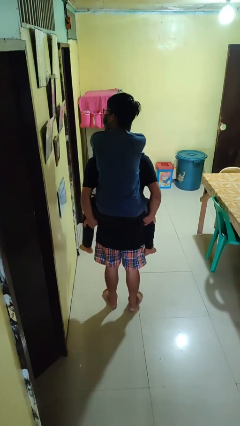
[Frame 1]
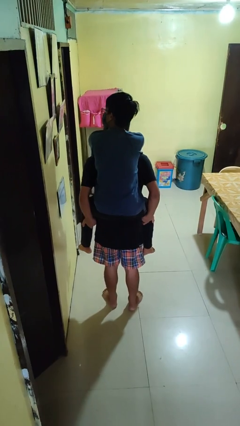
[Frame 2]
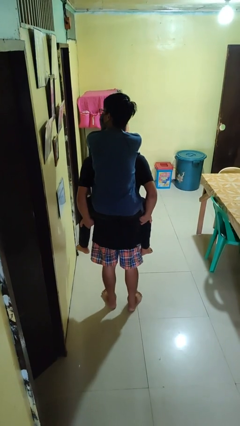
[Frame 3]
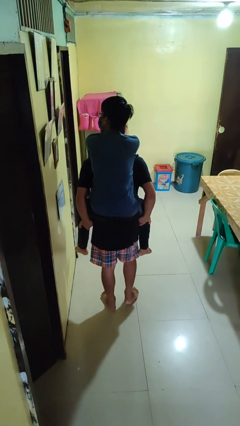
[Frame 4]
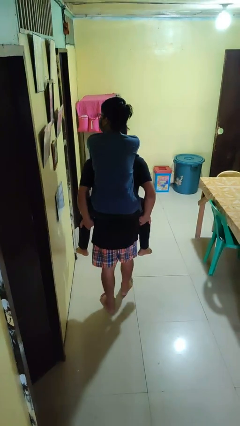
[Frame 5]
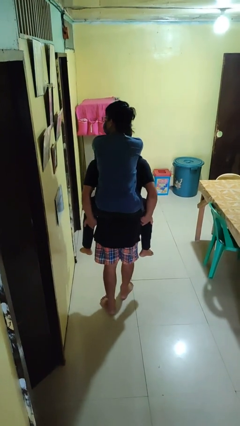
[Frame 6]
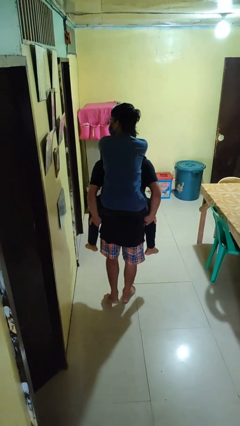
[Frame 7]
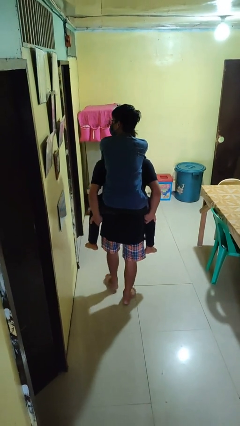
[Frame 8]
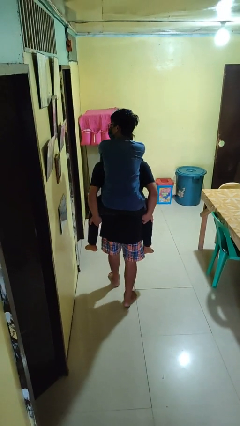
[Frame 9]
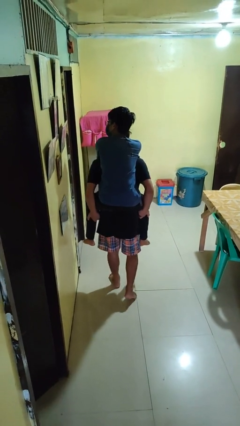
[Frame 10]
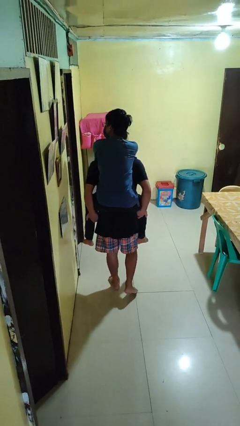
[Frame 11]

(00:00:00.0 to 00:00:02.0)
person carries person on back

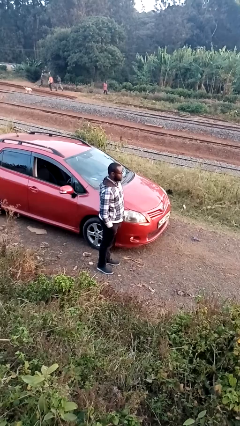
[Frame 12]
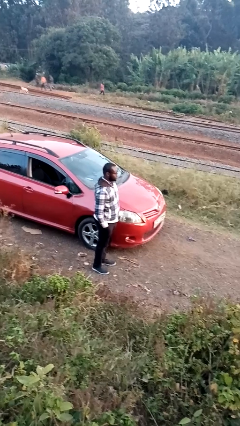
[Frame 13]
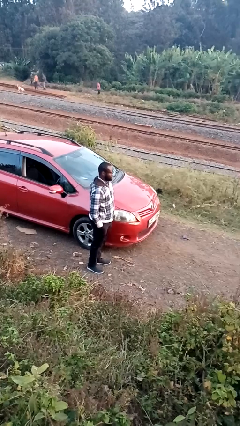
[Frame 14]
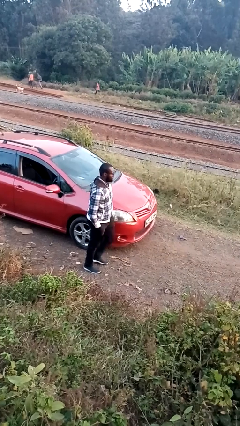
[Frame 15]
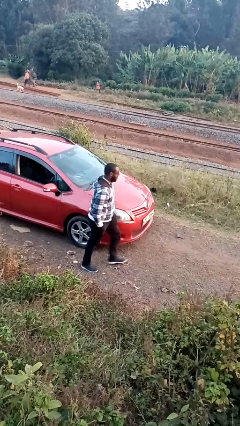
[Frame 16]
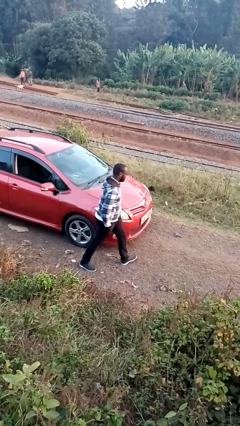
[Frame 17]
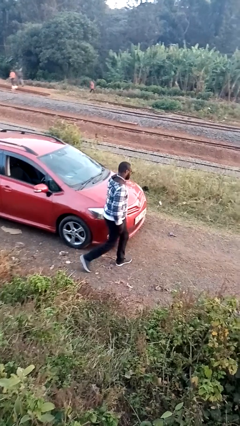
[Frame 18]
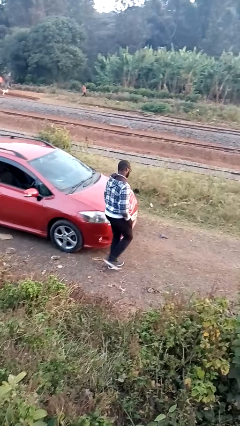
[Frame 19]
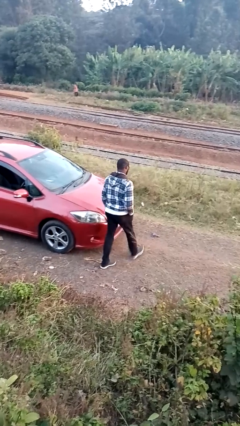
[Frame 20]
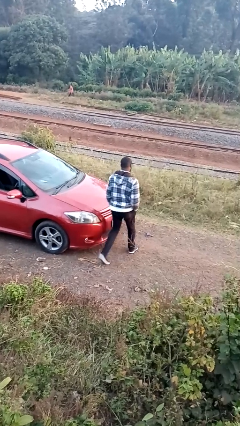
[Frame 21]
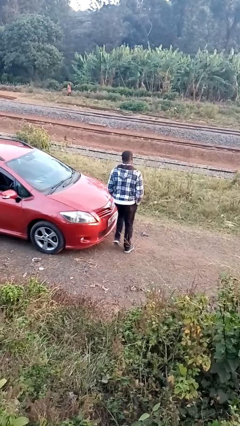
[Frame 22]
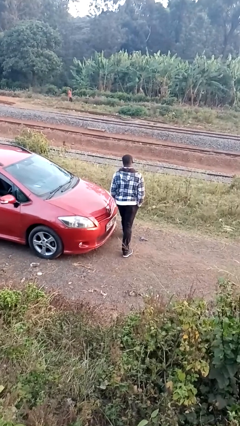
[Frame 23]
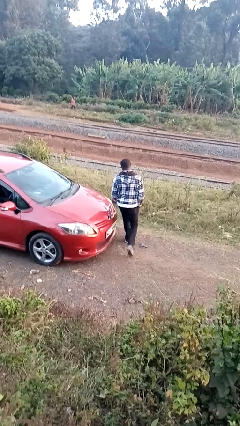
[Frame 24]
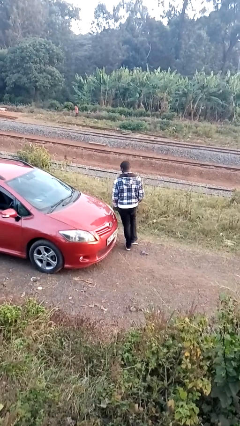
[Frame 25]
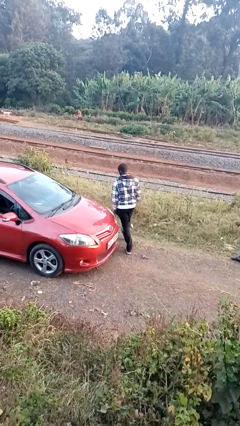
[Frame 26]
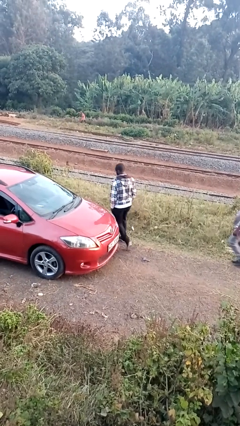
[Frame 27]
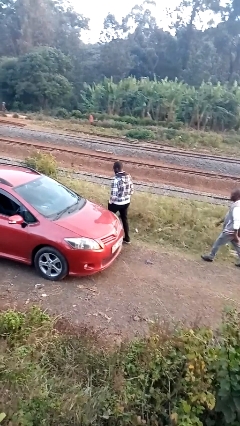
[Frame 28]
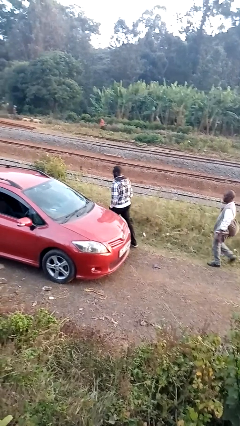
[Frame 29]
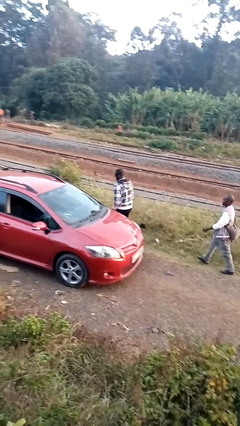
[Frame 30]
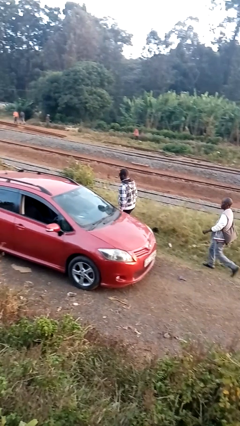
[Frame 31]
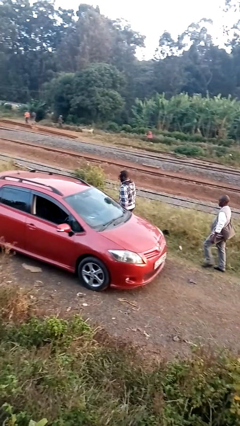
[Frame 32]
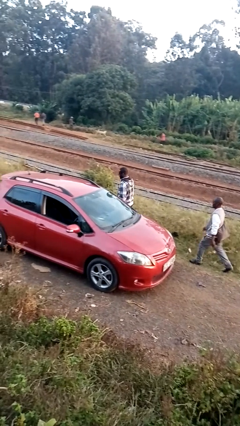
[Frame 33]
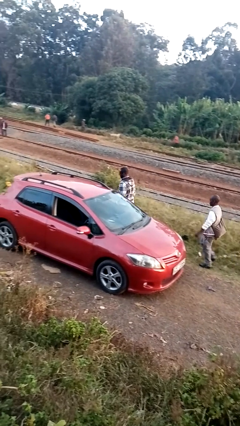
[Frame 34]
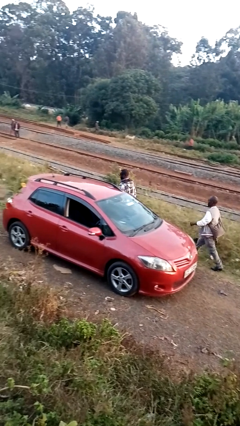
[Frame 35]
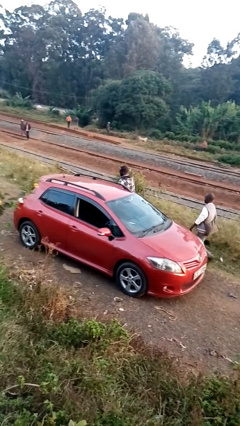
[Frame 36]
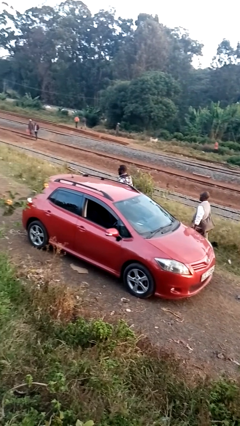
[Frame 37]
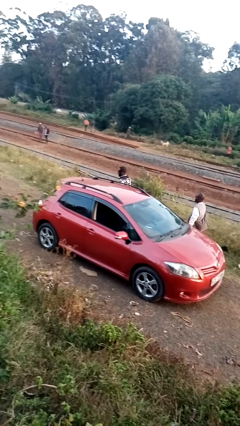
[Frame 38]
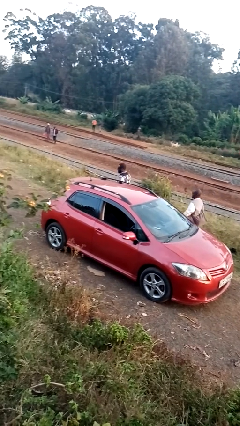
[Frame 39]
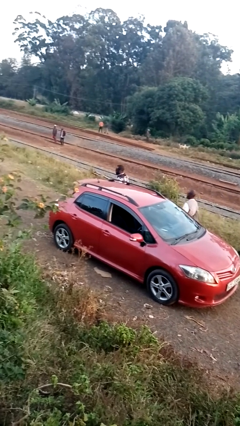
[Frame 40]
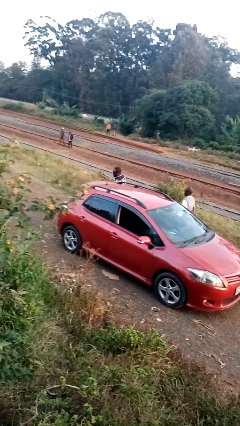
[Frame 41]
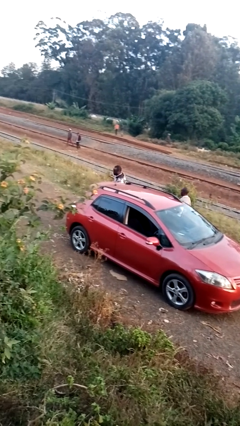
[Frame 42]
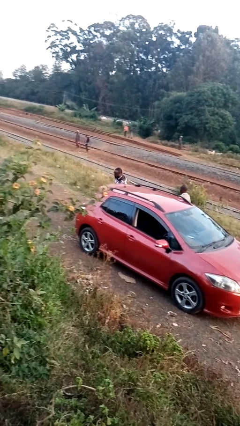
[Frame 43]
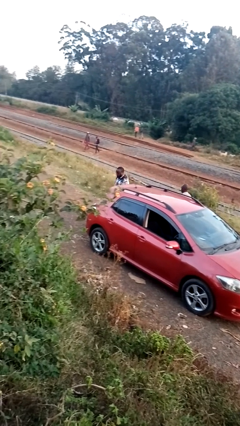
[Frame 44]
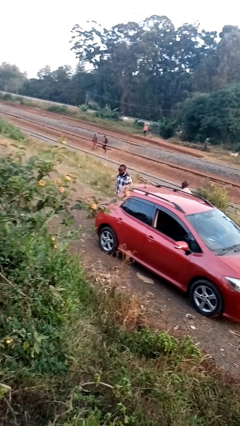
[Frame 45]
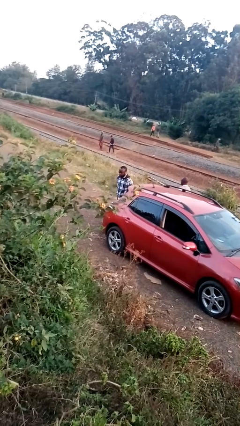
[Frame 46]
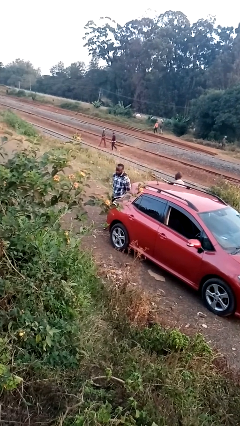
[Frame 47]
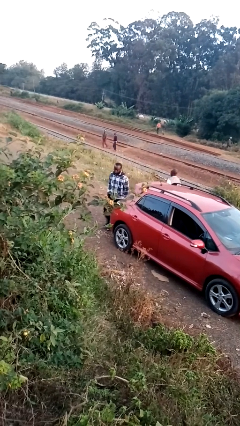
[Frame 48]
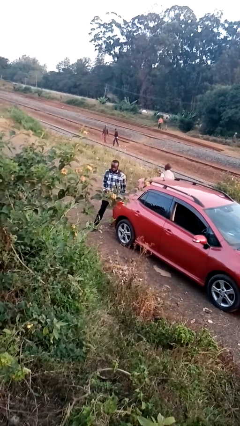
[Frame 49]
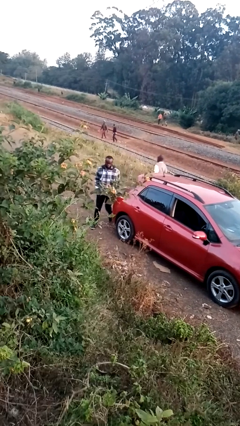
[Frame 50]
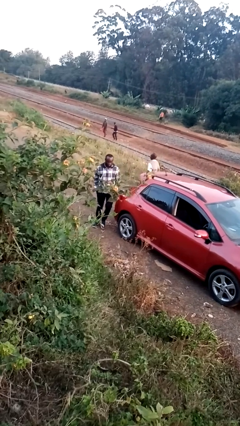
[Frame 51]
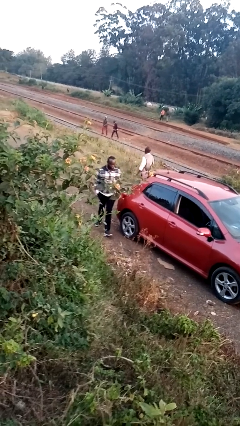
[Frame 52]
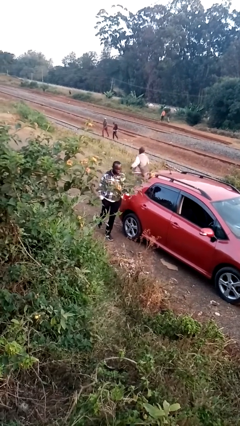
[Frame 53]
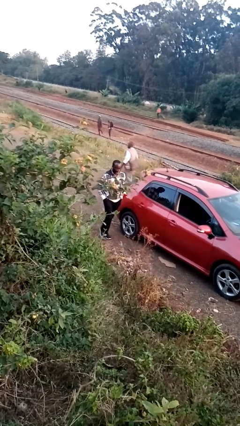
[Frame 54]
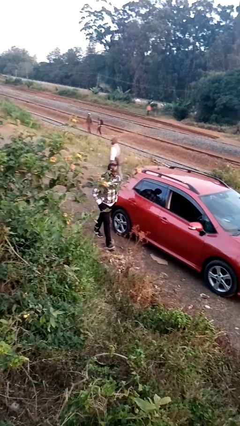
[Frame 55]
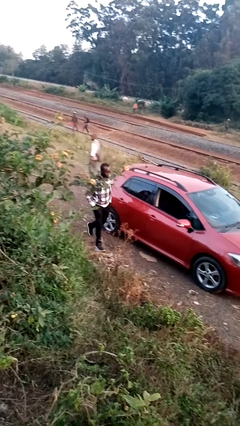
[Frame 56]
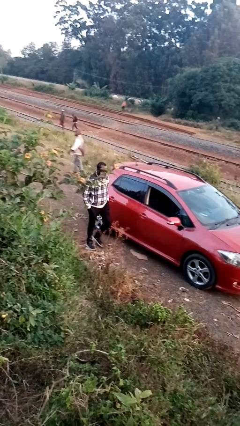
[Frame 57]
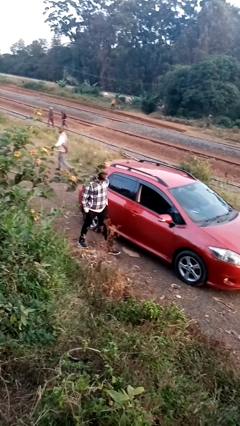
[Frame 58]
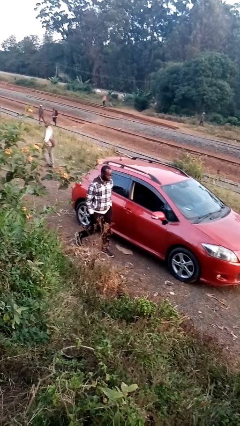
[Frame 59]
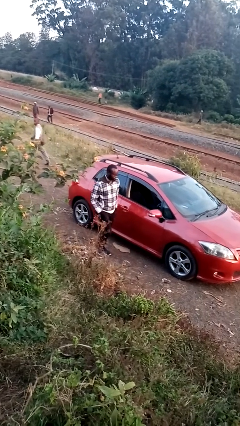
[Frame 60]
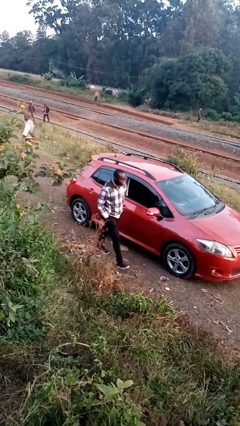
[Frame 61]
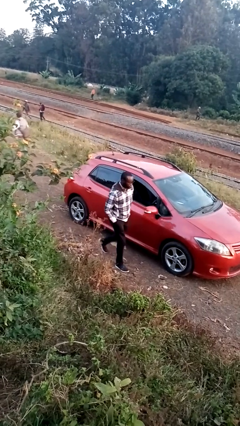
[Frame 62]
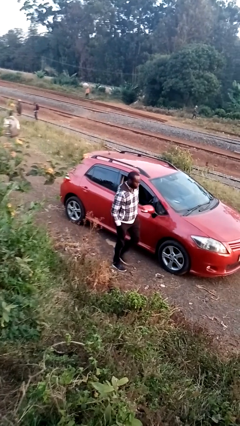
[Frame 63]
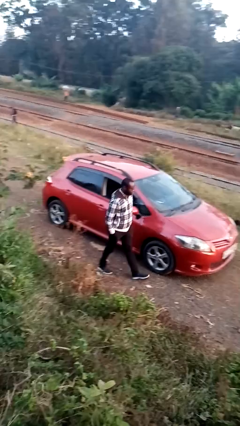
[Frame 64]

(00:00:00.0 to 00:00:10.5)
person walks around car

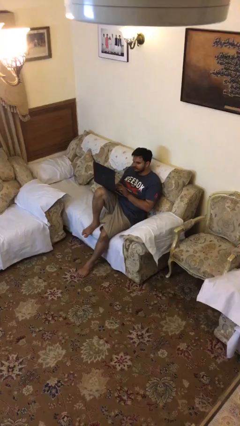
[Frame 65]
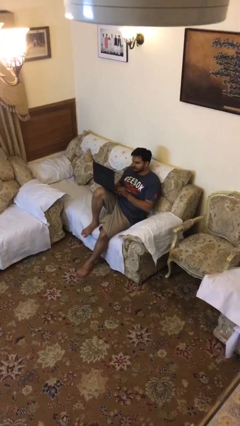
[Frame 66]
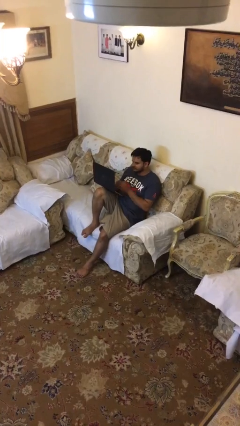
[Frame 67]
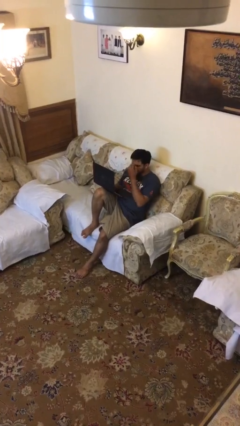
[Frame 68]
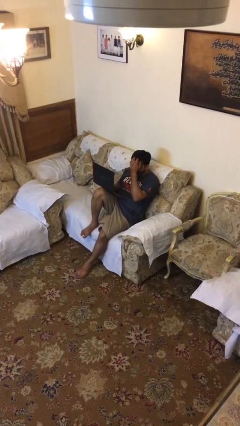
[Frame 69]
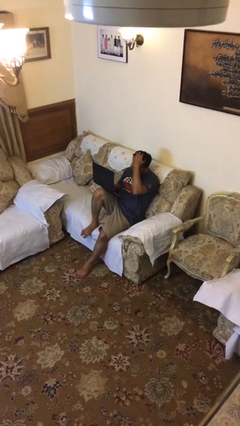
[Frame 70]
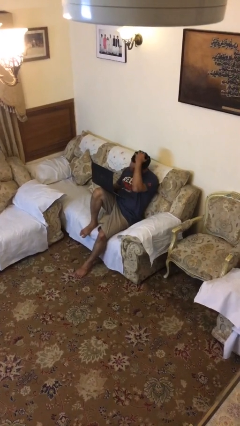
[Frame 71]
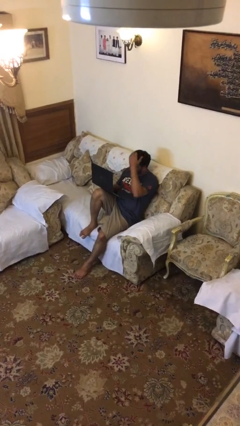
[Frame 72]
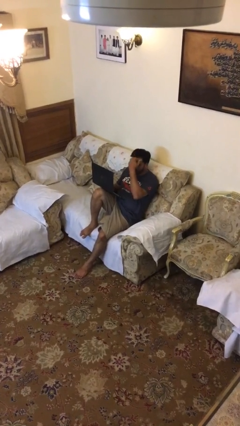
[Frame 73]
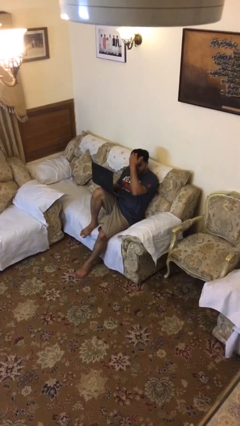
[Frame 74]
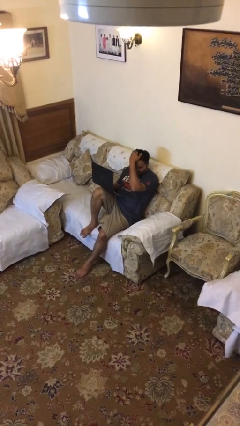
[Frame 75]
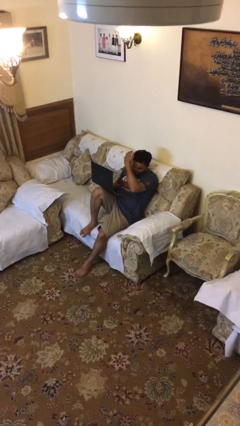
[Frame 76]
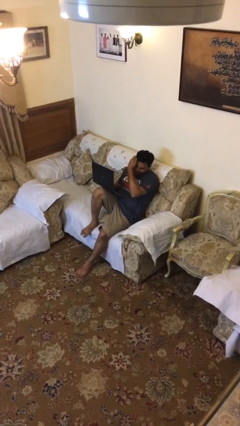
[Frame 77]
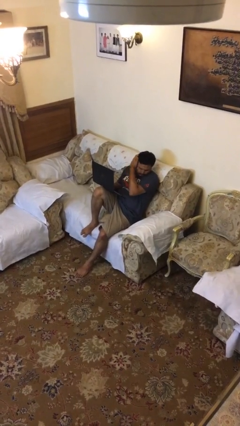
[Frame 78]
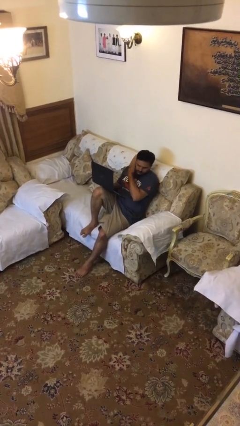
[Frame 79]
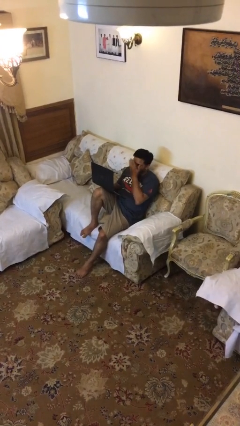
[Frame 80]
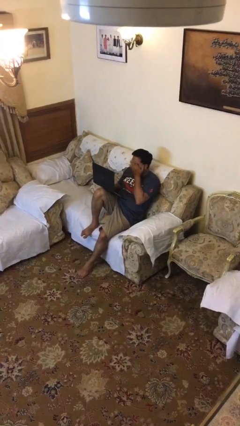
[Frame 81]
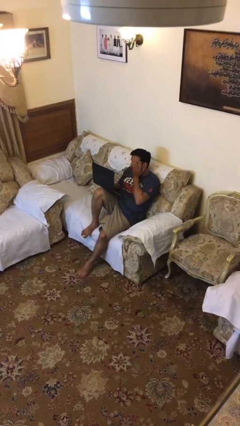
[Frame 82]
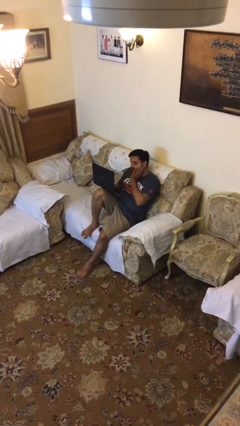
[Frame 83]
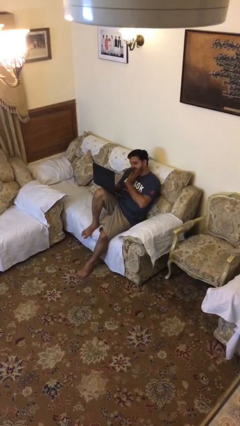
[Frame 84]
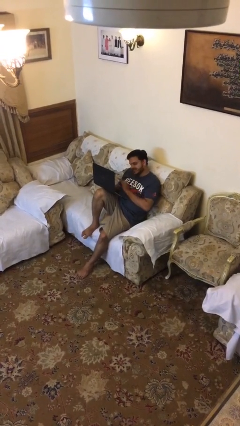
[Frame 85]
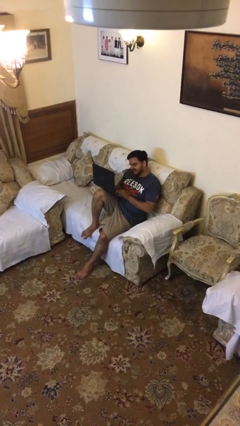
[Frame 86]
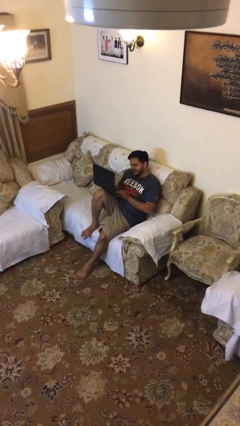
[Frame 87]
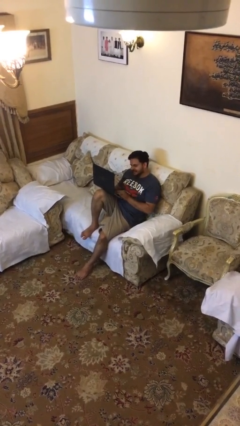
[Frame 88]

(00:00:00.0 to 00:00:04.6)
person interacts with laptop

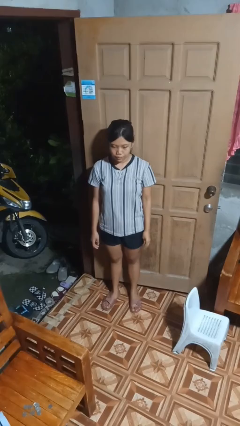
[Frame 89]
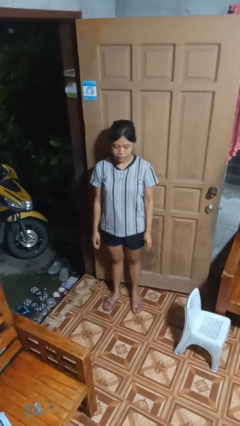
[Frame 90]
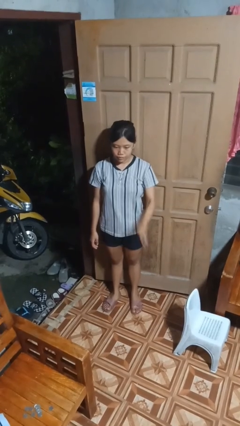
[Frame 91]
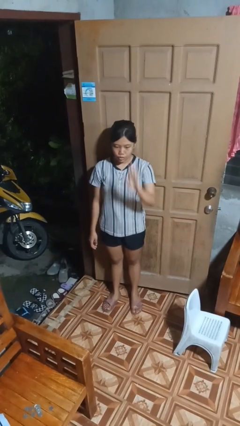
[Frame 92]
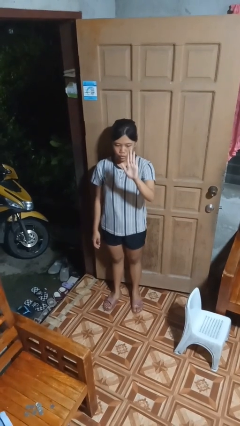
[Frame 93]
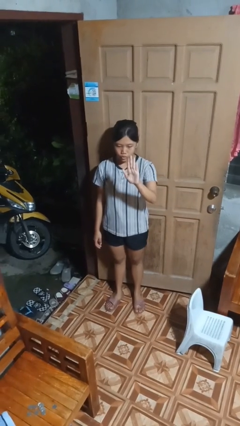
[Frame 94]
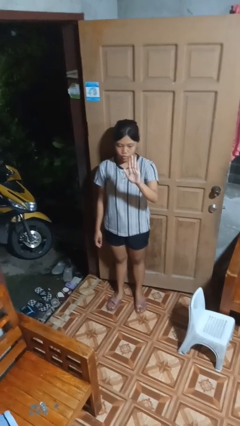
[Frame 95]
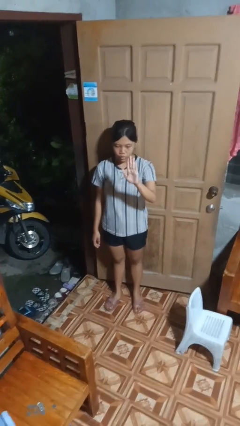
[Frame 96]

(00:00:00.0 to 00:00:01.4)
person gestures number five
